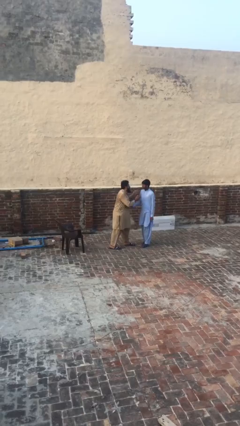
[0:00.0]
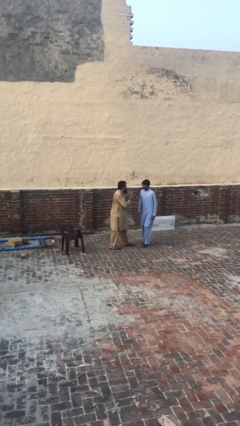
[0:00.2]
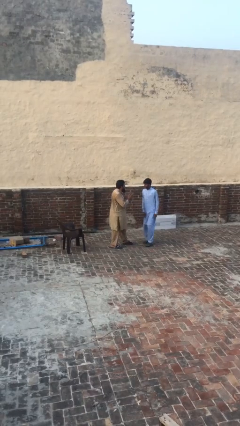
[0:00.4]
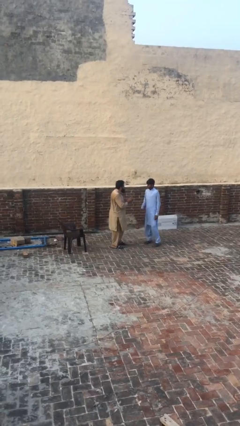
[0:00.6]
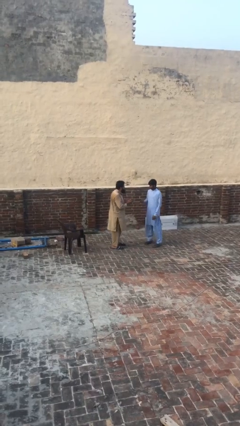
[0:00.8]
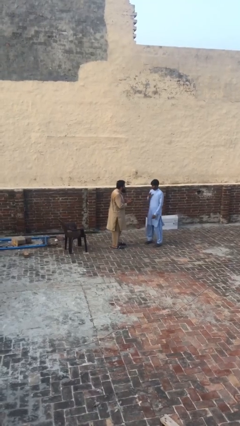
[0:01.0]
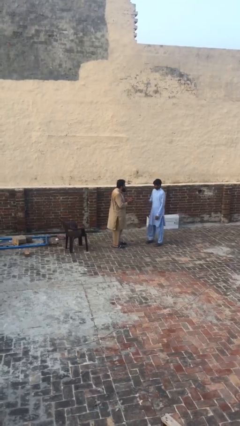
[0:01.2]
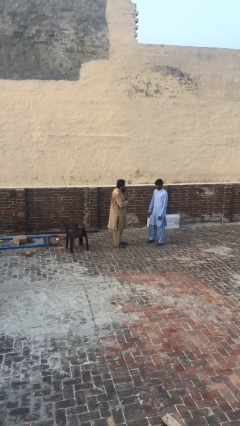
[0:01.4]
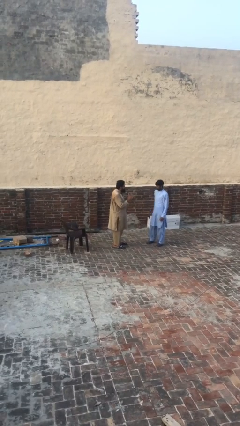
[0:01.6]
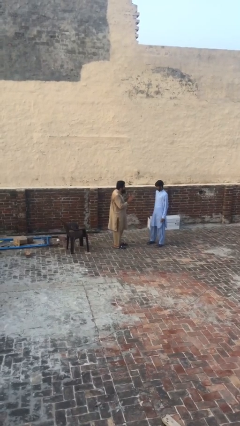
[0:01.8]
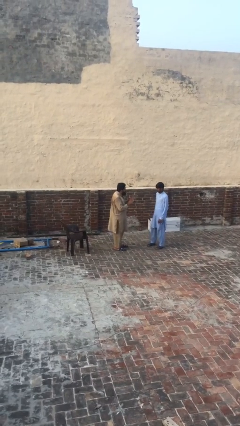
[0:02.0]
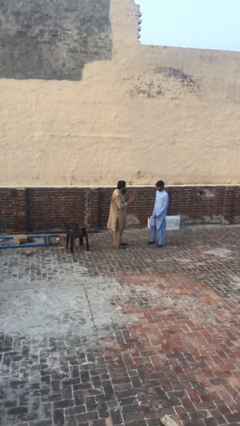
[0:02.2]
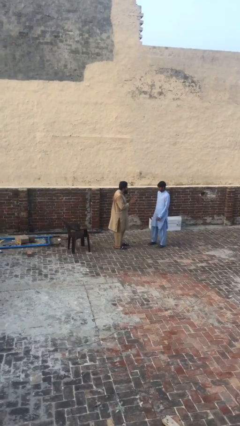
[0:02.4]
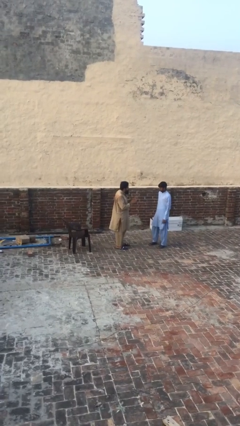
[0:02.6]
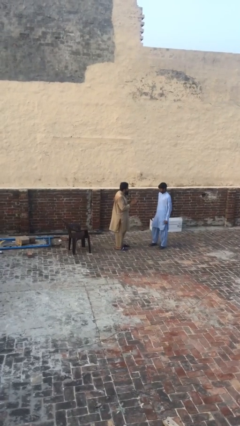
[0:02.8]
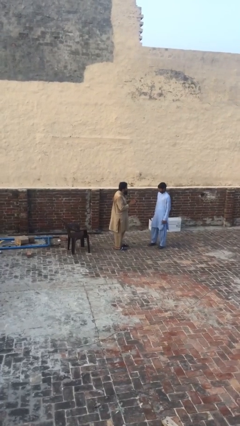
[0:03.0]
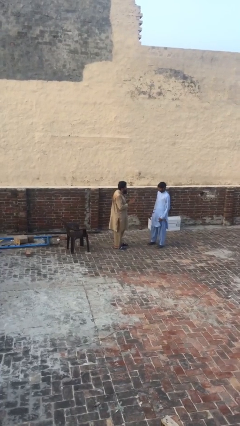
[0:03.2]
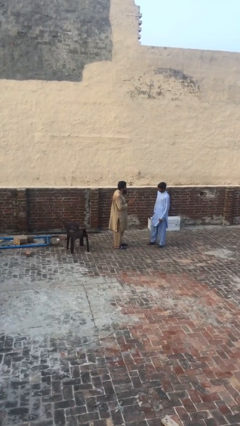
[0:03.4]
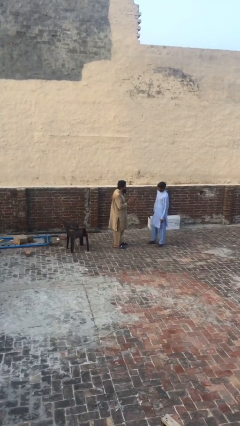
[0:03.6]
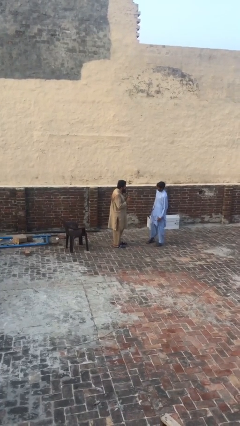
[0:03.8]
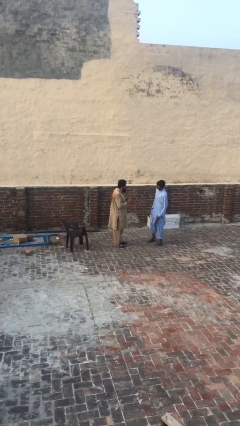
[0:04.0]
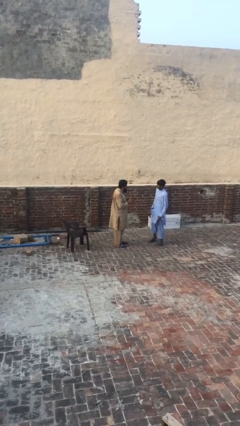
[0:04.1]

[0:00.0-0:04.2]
person talks to person

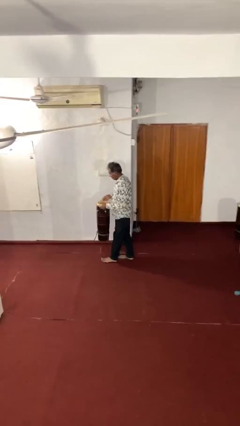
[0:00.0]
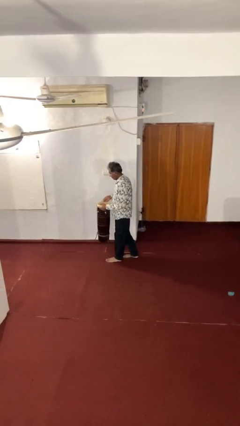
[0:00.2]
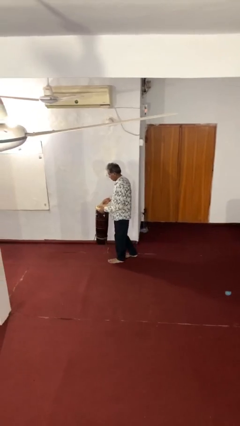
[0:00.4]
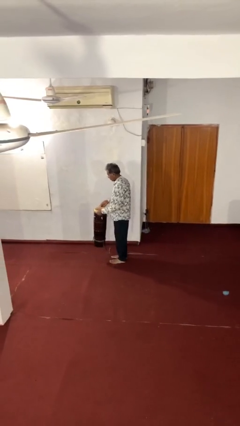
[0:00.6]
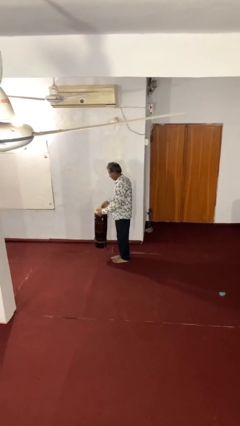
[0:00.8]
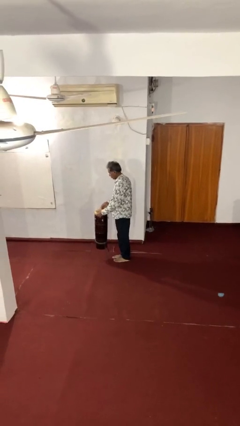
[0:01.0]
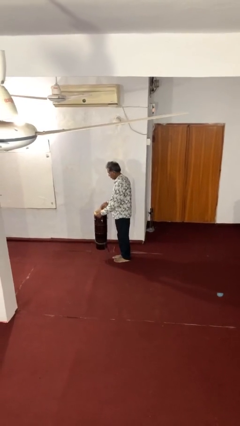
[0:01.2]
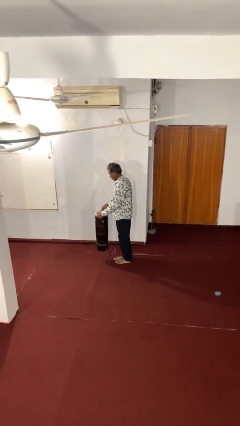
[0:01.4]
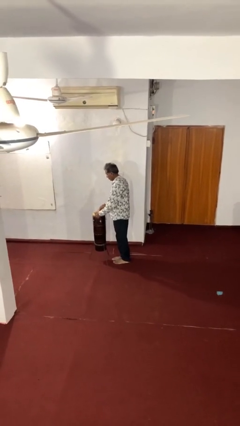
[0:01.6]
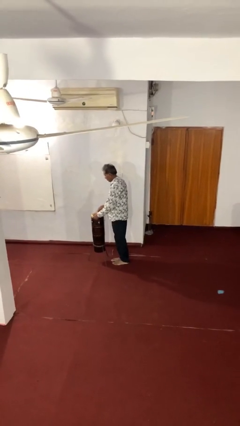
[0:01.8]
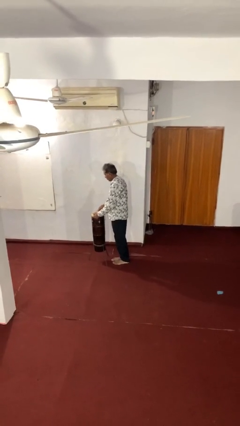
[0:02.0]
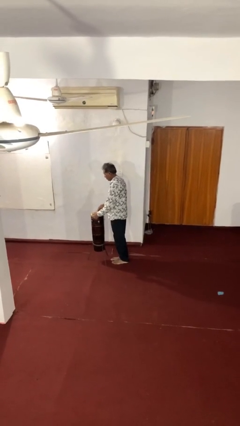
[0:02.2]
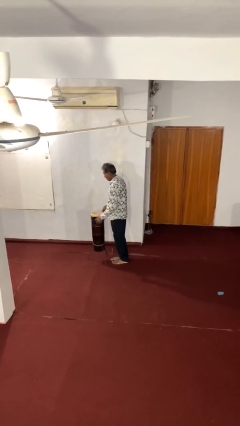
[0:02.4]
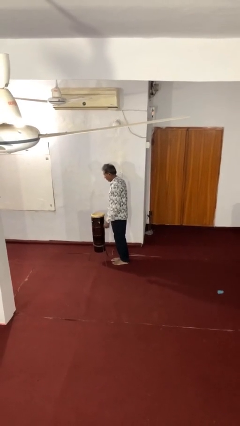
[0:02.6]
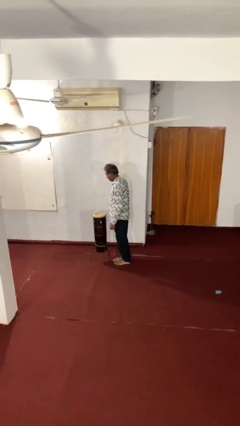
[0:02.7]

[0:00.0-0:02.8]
person puts down object on floor

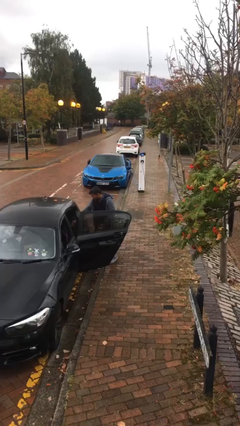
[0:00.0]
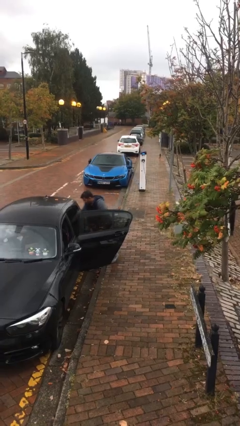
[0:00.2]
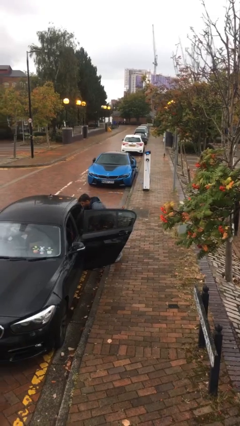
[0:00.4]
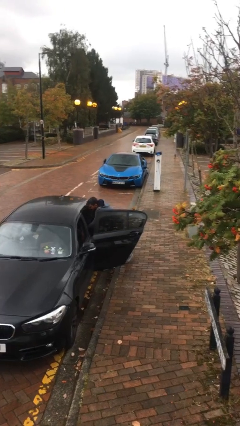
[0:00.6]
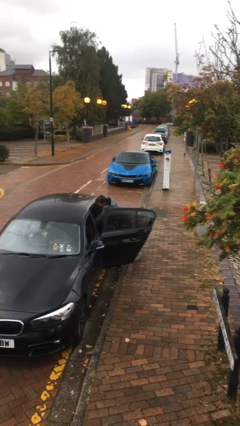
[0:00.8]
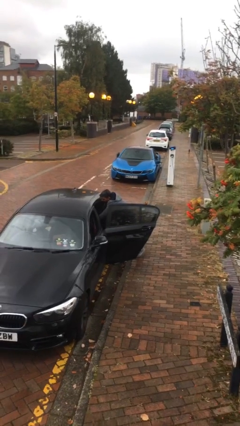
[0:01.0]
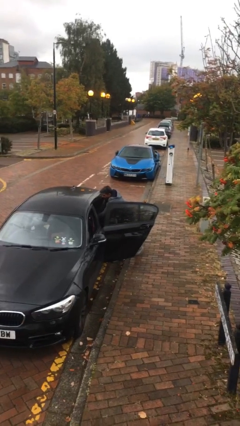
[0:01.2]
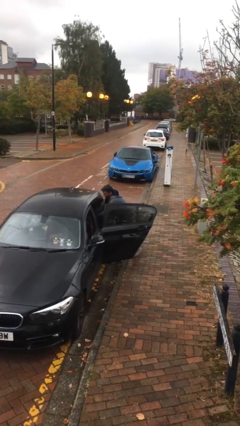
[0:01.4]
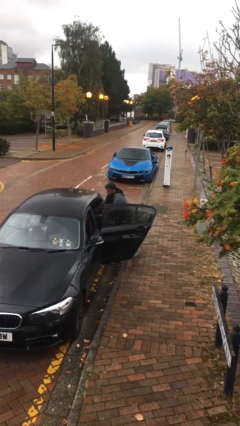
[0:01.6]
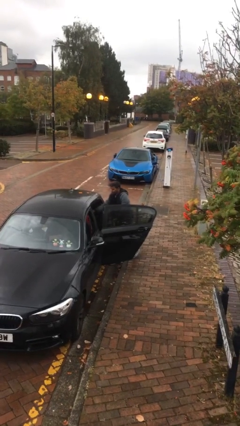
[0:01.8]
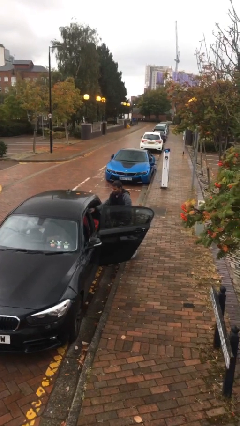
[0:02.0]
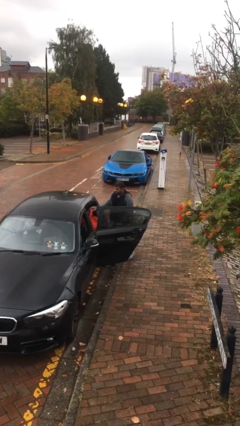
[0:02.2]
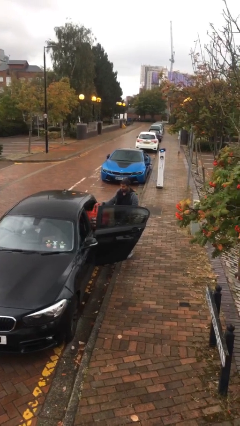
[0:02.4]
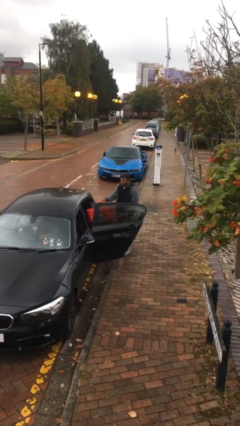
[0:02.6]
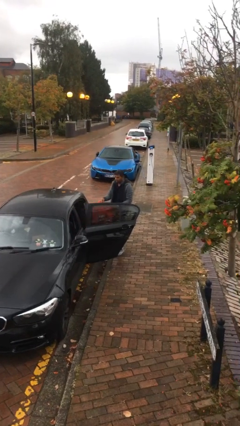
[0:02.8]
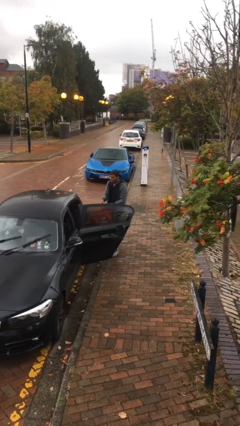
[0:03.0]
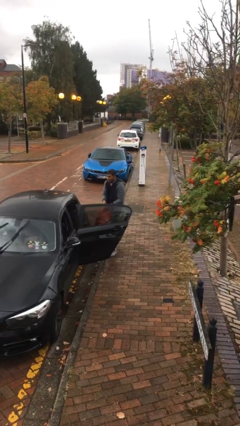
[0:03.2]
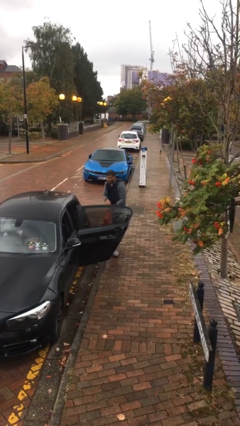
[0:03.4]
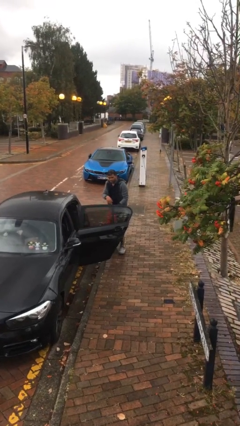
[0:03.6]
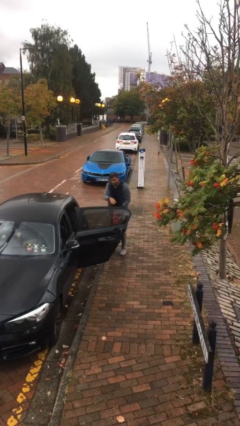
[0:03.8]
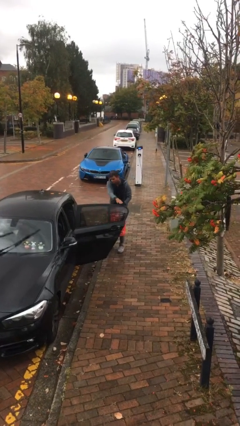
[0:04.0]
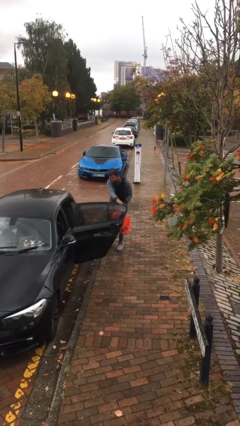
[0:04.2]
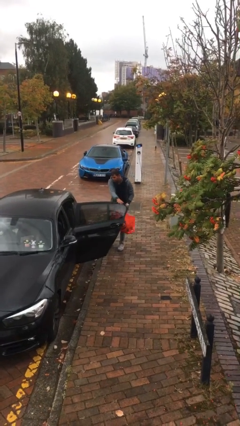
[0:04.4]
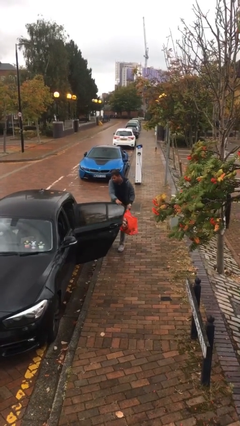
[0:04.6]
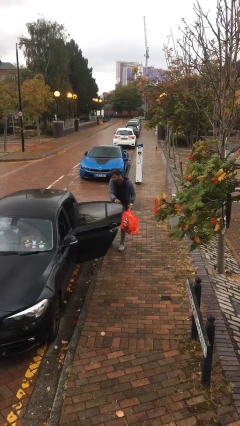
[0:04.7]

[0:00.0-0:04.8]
person unloads car

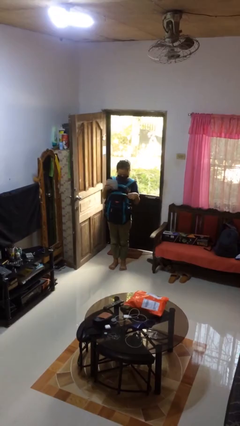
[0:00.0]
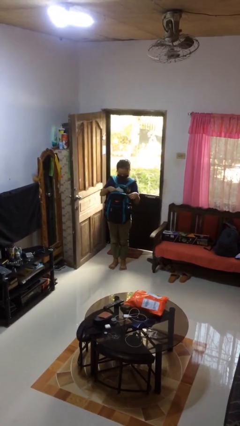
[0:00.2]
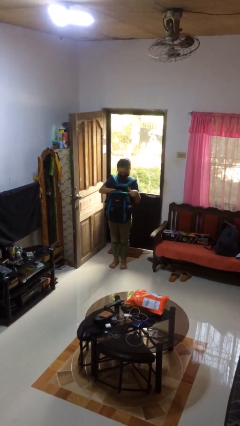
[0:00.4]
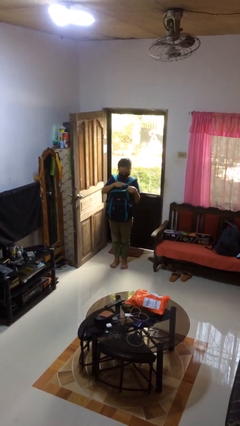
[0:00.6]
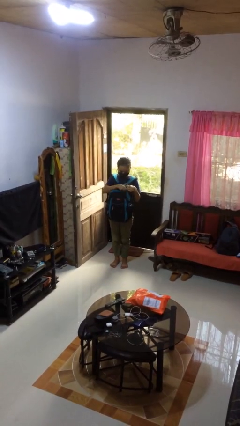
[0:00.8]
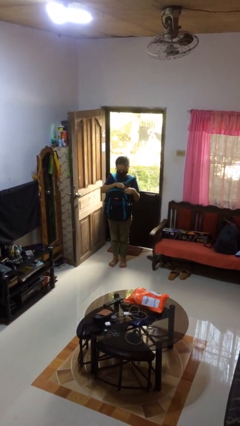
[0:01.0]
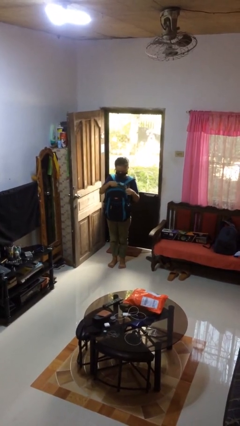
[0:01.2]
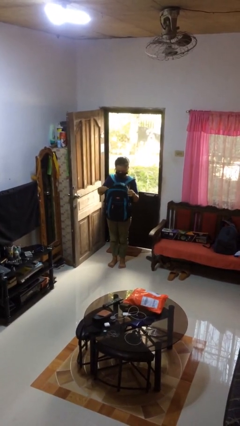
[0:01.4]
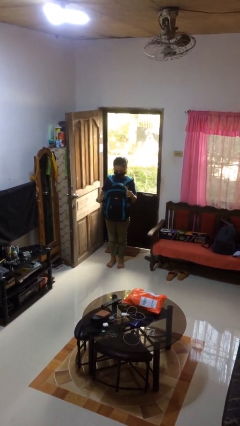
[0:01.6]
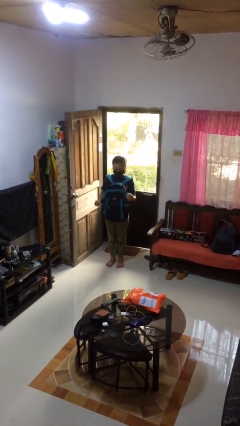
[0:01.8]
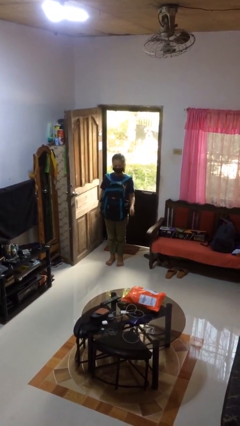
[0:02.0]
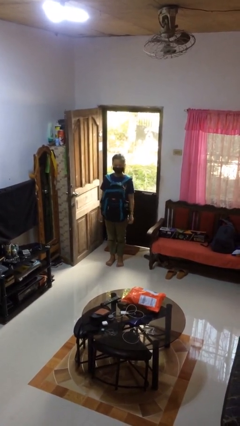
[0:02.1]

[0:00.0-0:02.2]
person puts object into backpack

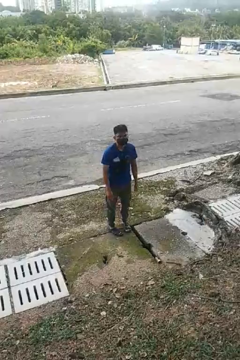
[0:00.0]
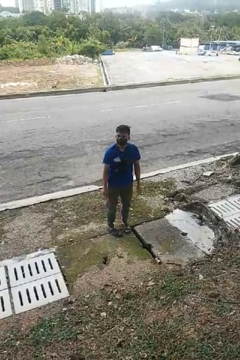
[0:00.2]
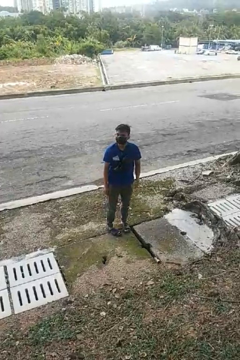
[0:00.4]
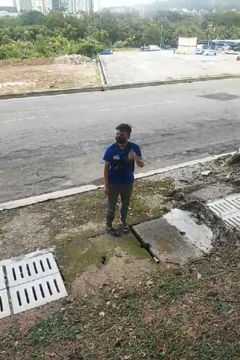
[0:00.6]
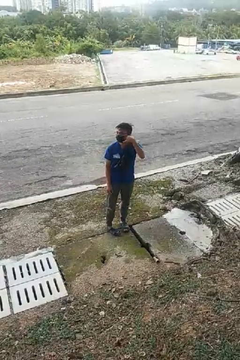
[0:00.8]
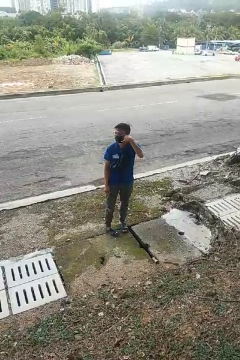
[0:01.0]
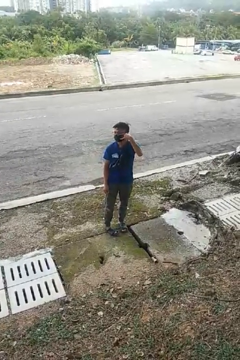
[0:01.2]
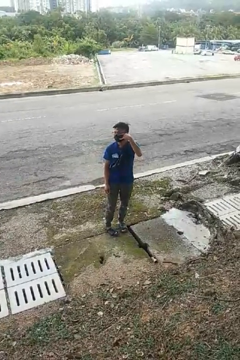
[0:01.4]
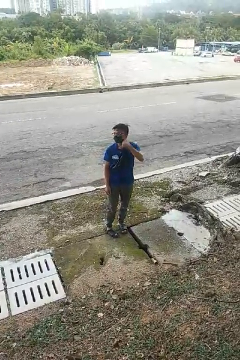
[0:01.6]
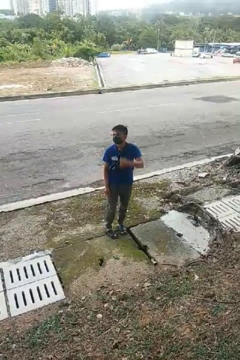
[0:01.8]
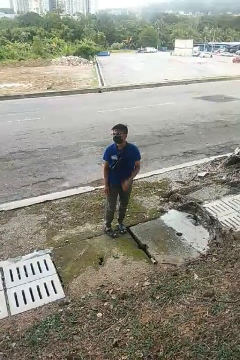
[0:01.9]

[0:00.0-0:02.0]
person gestures call me

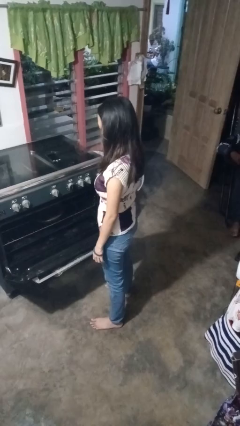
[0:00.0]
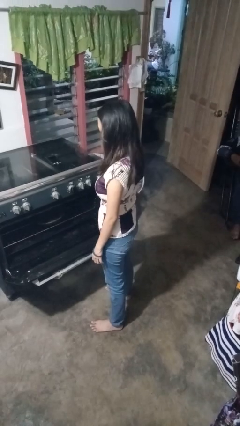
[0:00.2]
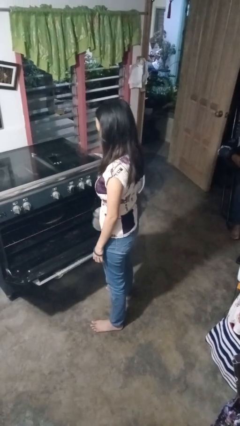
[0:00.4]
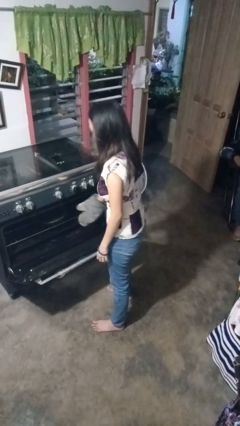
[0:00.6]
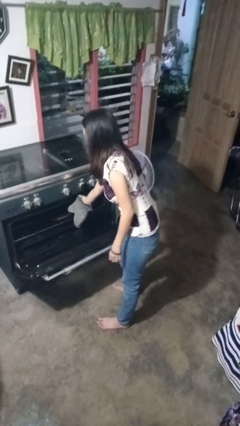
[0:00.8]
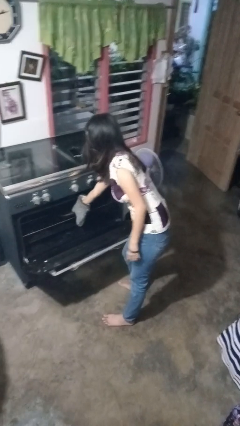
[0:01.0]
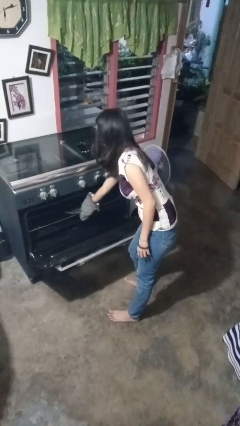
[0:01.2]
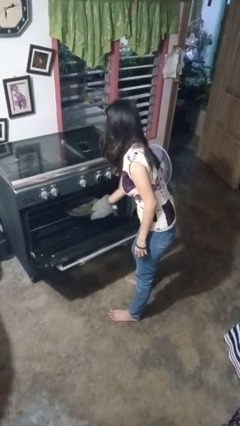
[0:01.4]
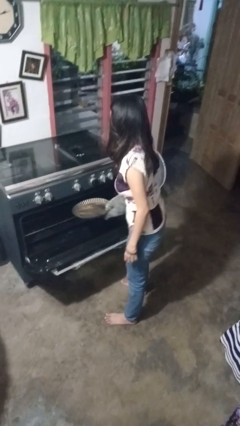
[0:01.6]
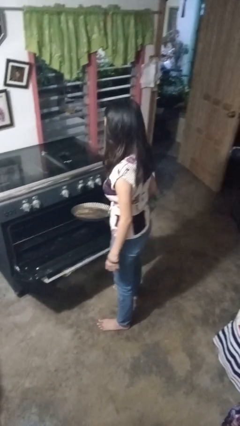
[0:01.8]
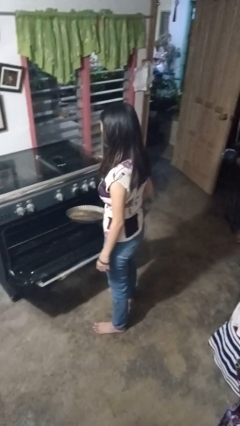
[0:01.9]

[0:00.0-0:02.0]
person takes object from oven
